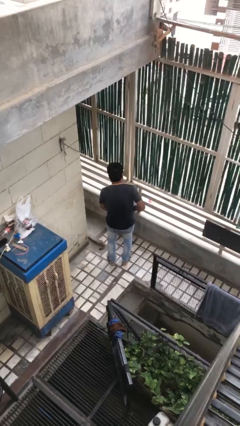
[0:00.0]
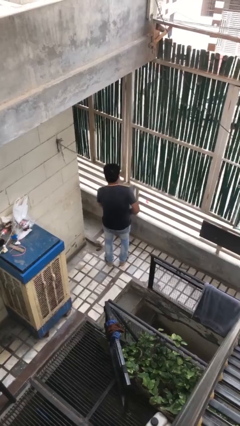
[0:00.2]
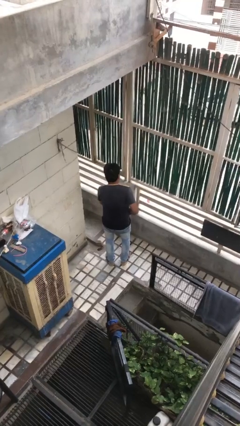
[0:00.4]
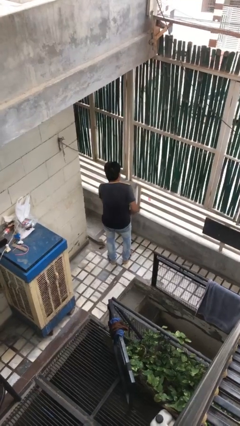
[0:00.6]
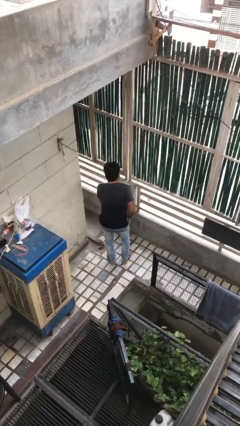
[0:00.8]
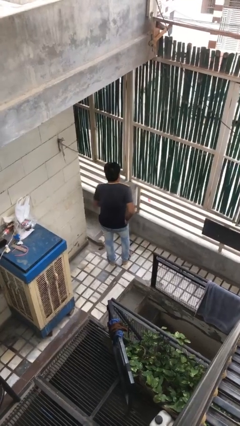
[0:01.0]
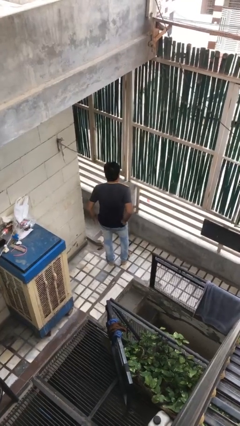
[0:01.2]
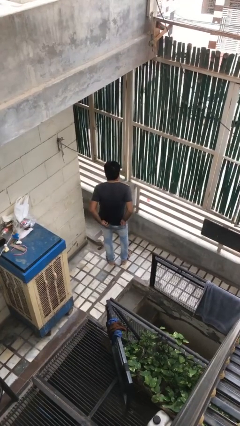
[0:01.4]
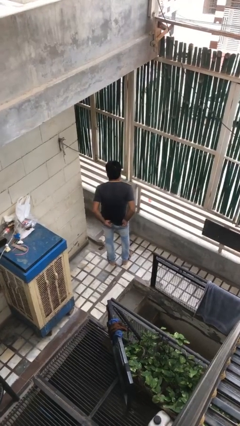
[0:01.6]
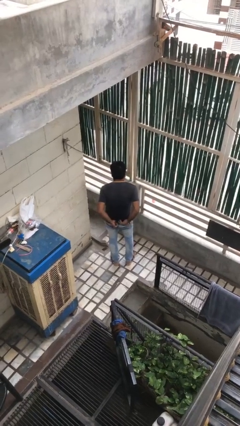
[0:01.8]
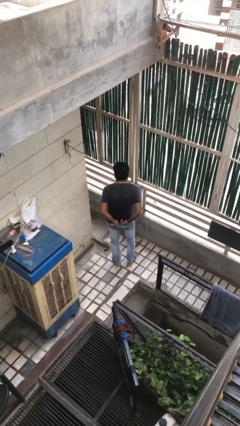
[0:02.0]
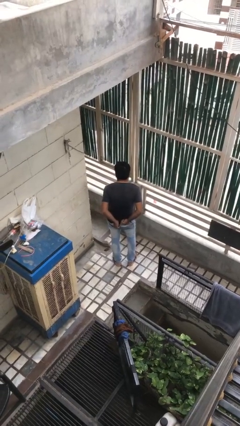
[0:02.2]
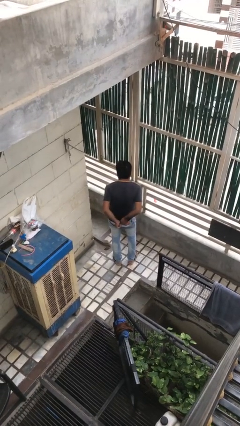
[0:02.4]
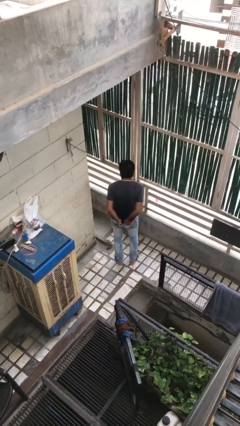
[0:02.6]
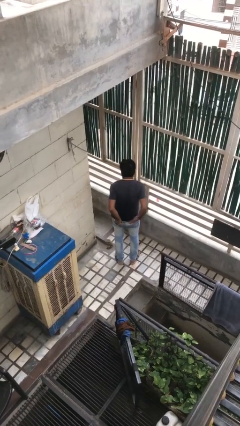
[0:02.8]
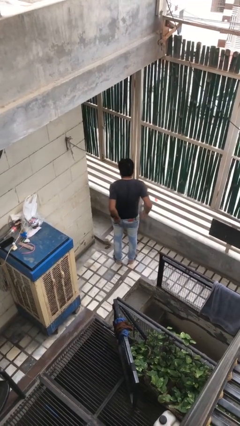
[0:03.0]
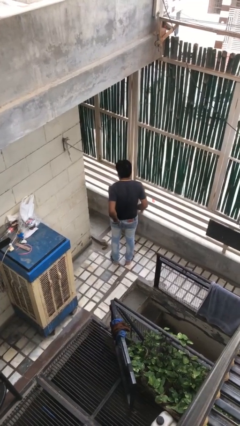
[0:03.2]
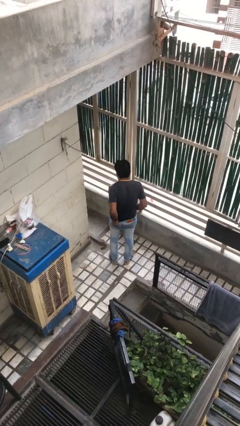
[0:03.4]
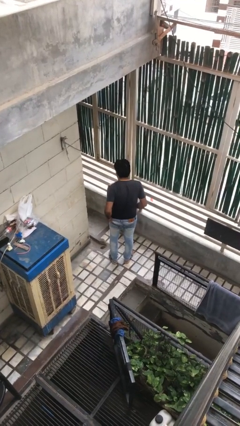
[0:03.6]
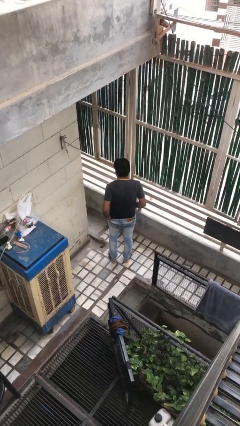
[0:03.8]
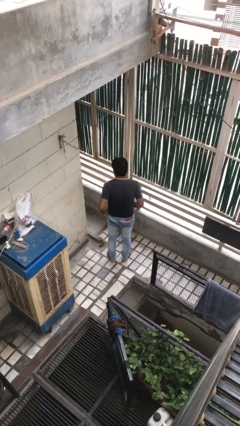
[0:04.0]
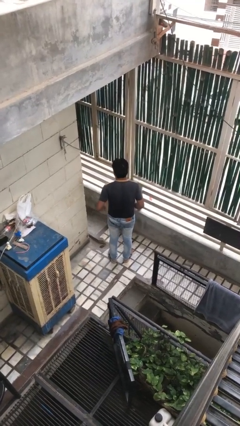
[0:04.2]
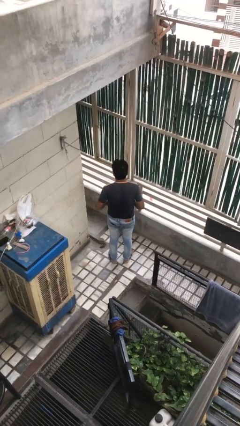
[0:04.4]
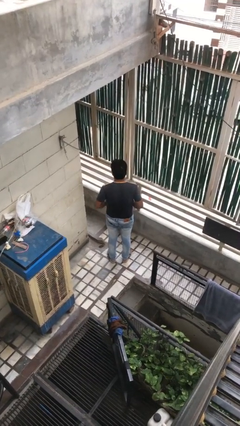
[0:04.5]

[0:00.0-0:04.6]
person tucks in shirt

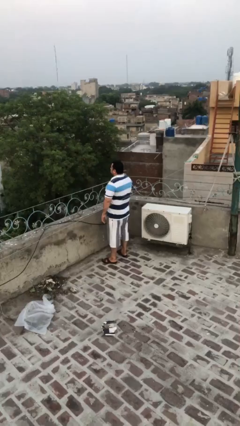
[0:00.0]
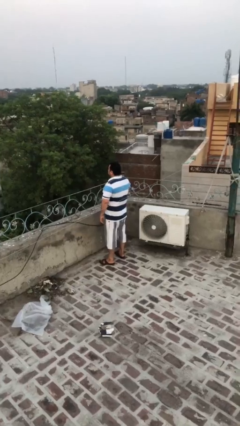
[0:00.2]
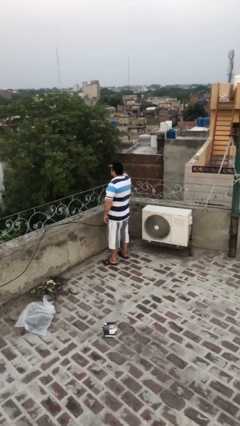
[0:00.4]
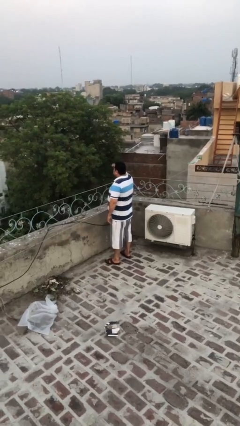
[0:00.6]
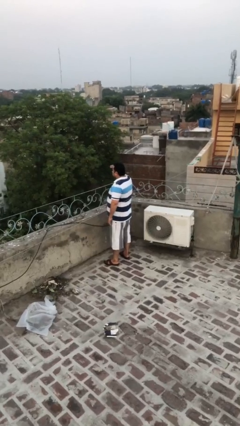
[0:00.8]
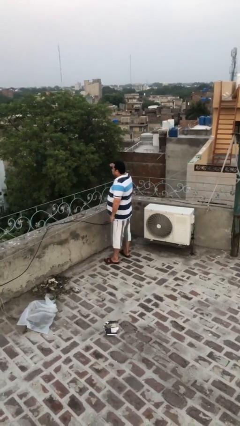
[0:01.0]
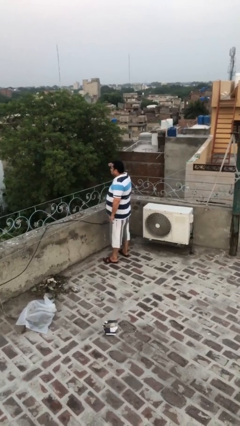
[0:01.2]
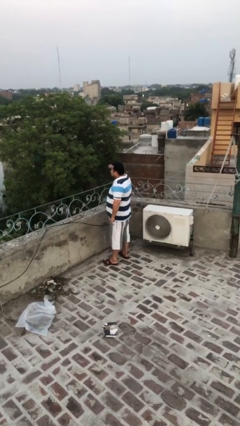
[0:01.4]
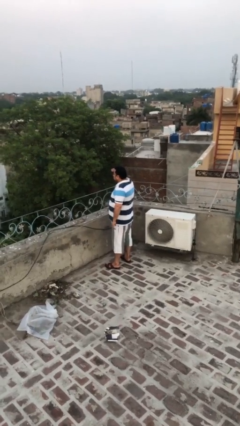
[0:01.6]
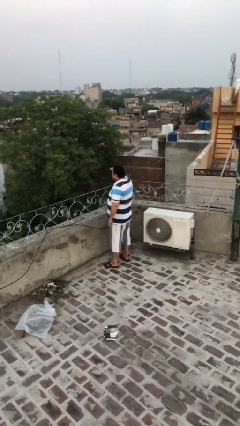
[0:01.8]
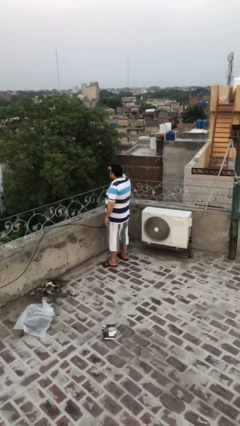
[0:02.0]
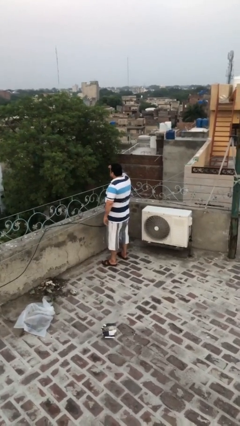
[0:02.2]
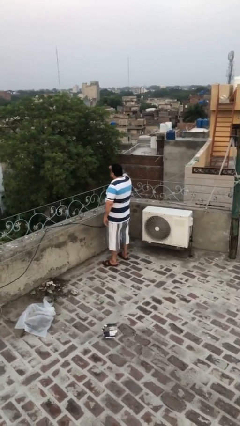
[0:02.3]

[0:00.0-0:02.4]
person shades eyes

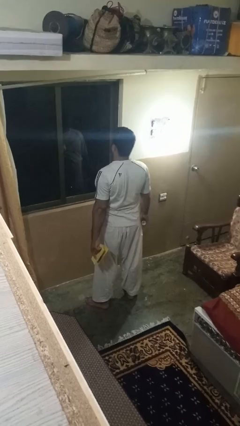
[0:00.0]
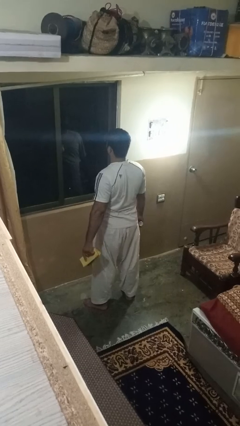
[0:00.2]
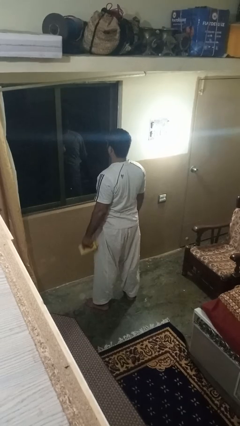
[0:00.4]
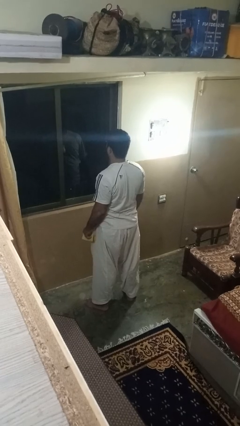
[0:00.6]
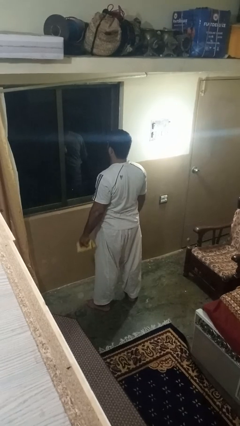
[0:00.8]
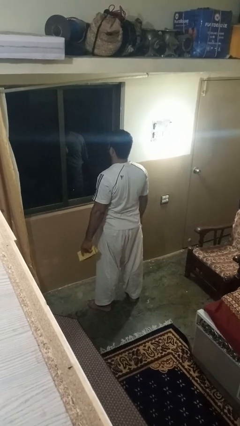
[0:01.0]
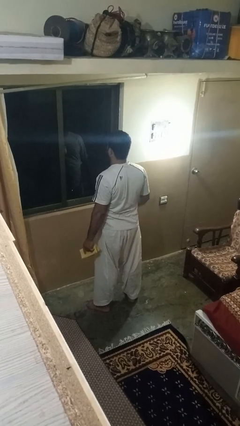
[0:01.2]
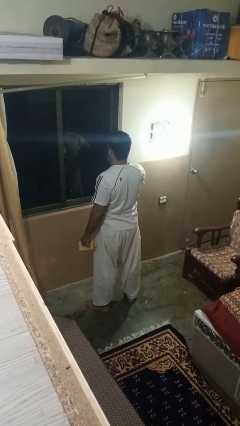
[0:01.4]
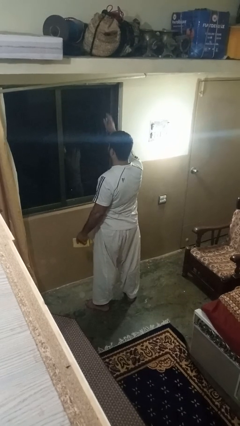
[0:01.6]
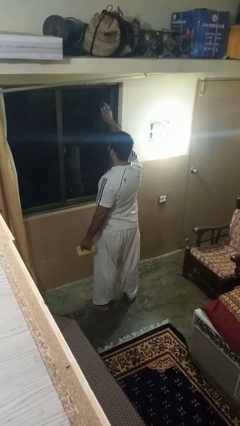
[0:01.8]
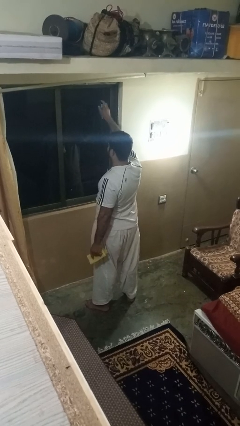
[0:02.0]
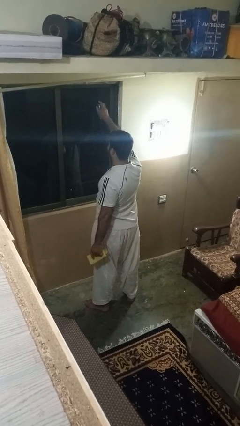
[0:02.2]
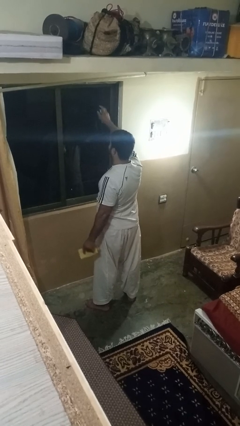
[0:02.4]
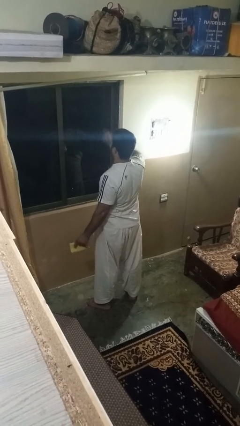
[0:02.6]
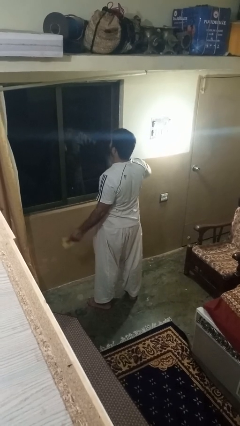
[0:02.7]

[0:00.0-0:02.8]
person washes window

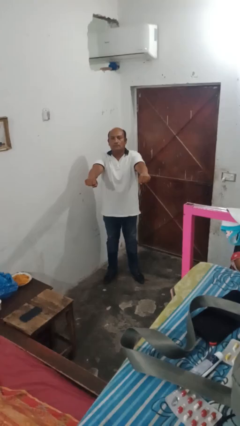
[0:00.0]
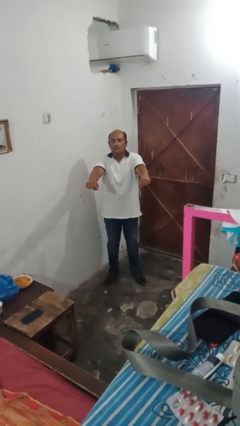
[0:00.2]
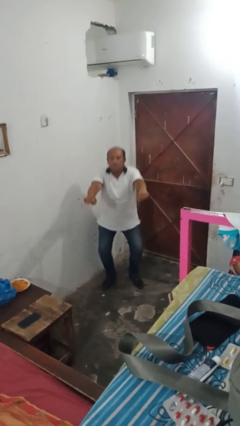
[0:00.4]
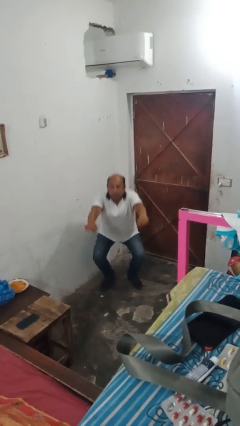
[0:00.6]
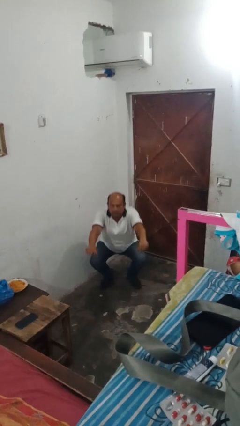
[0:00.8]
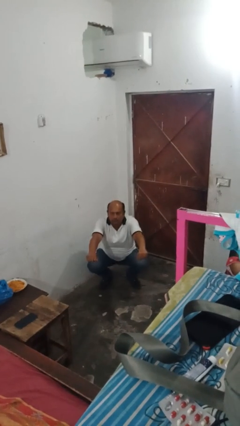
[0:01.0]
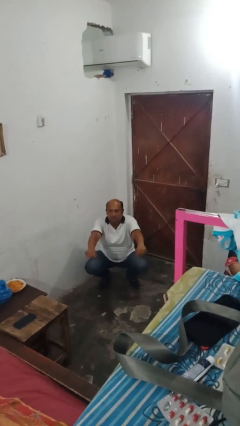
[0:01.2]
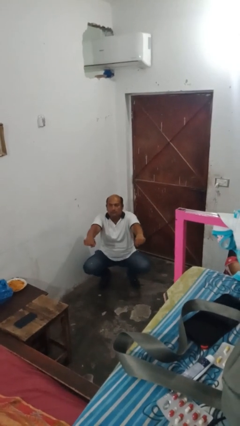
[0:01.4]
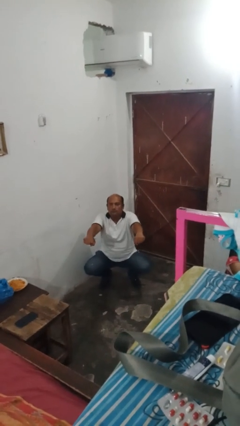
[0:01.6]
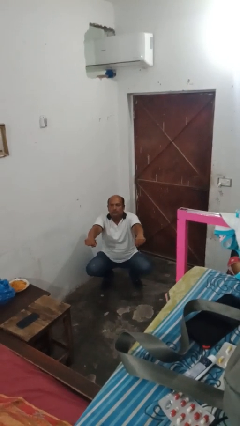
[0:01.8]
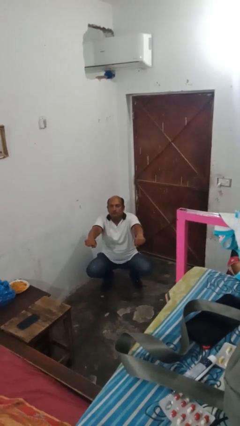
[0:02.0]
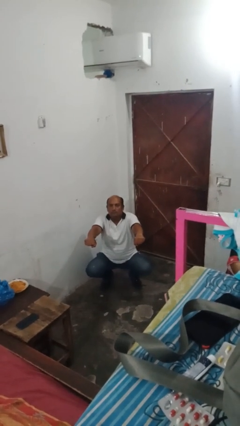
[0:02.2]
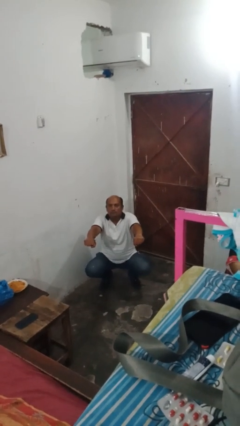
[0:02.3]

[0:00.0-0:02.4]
person squats

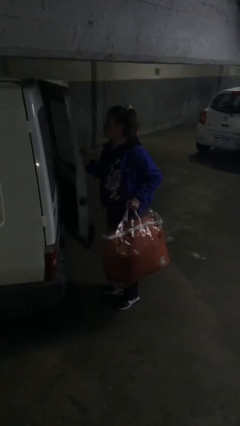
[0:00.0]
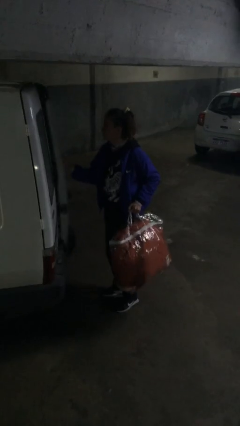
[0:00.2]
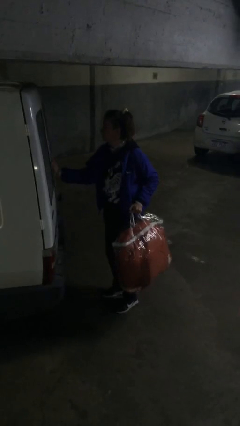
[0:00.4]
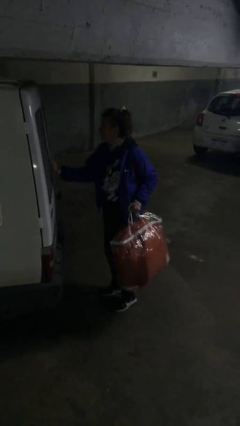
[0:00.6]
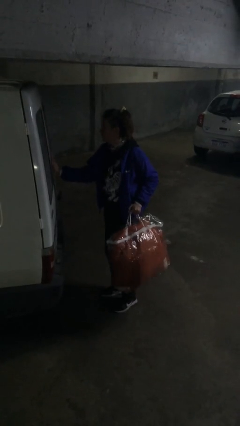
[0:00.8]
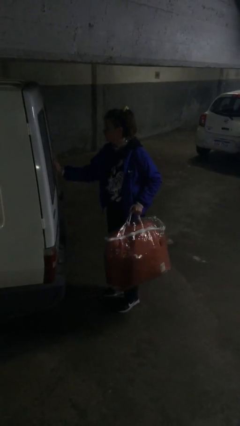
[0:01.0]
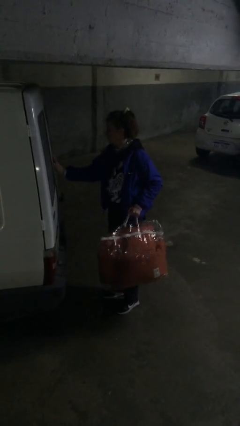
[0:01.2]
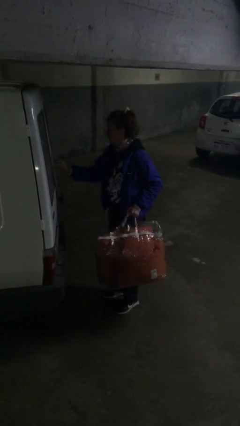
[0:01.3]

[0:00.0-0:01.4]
person closes car door

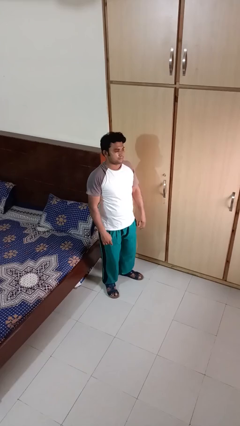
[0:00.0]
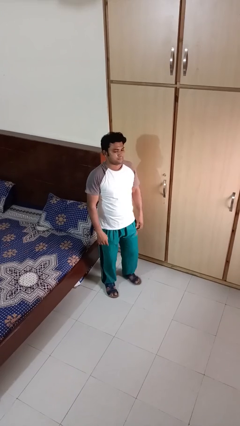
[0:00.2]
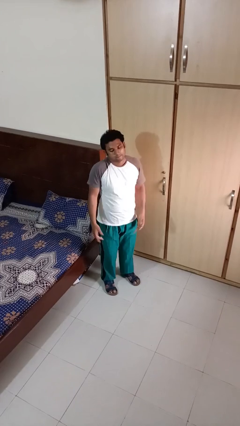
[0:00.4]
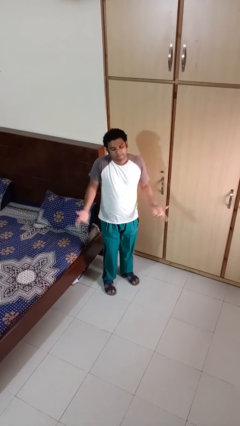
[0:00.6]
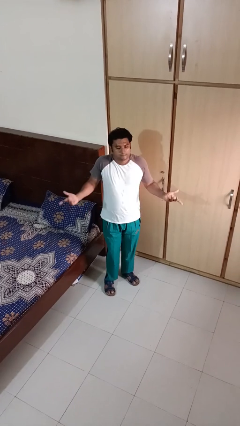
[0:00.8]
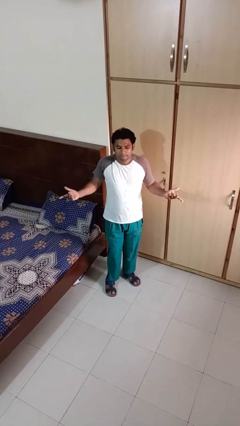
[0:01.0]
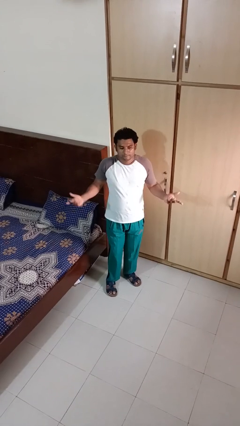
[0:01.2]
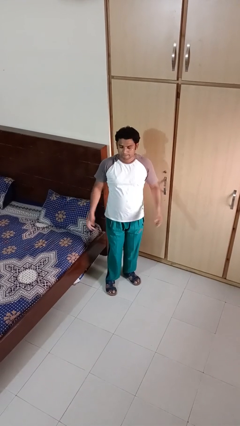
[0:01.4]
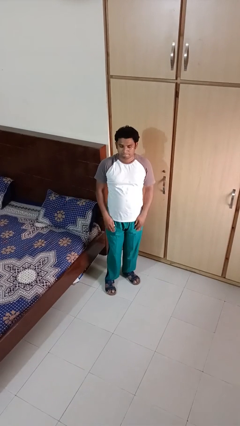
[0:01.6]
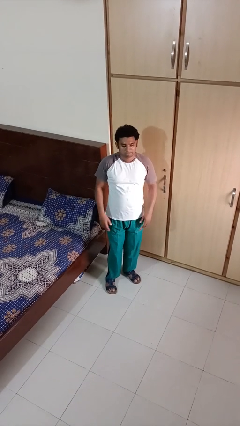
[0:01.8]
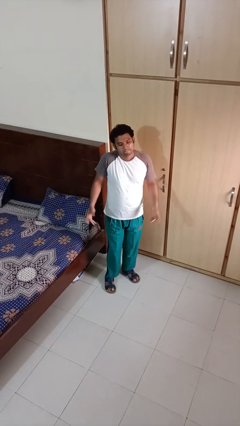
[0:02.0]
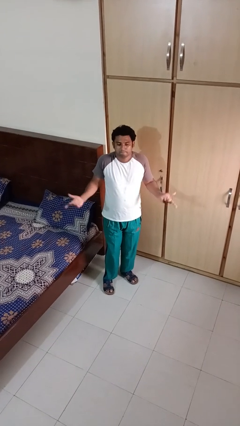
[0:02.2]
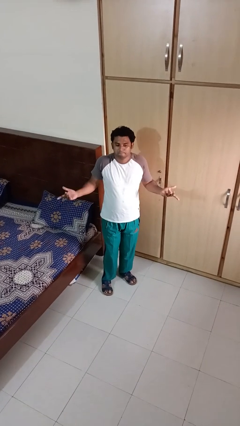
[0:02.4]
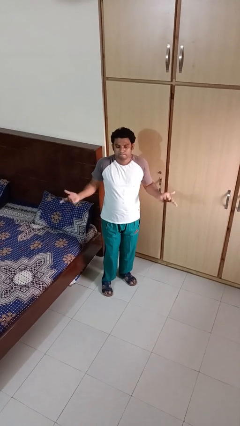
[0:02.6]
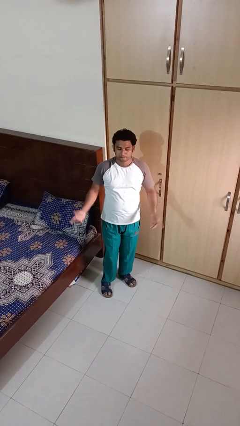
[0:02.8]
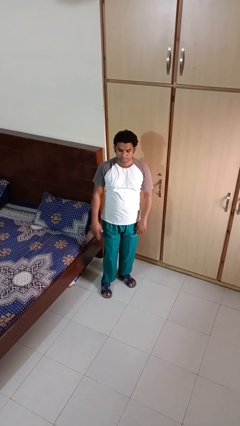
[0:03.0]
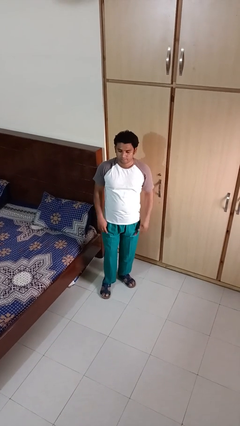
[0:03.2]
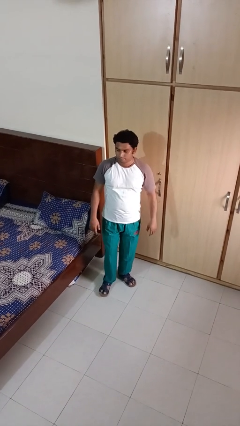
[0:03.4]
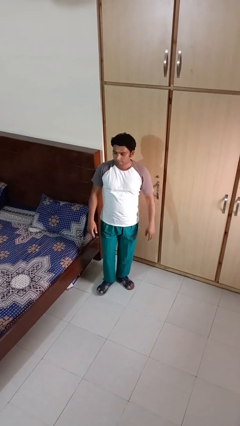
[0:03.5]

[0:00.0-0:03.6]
person shrugs

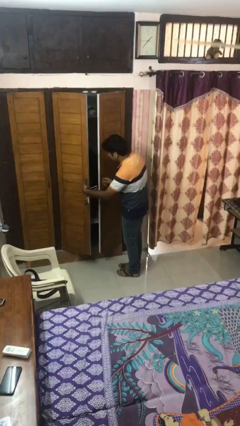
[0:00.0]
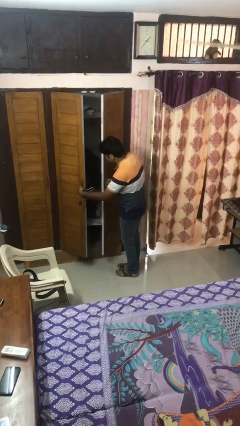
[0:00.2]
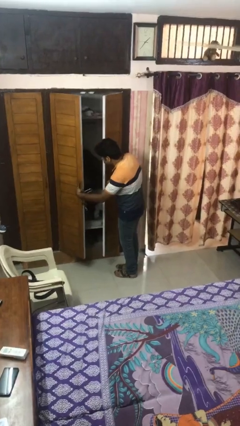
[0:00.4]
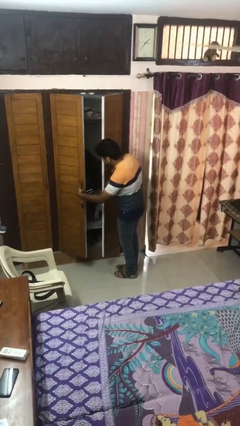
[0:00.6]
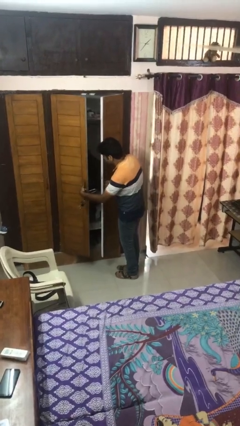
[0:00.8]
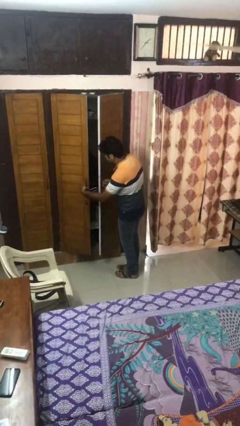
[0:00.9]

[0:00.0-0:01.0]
person opens facility door
